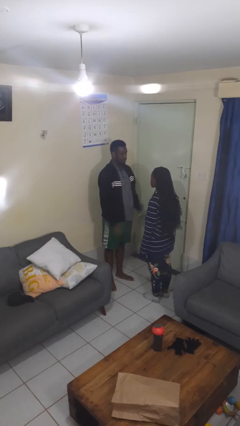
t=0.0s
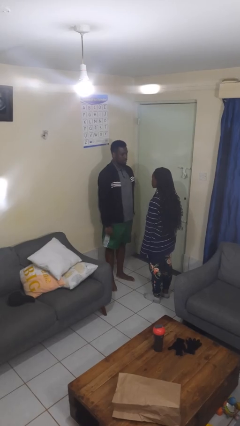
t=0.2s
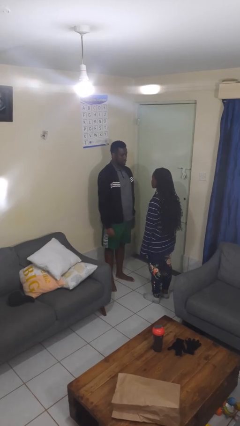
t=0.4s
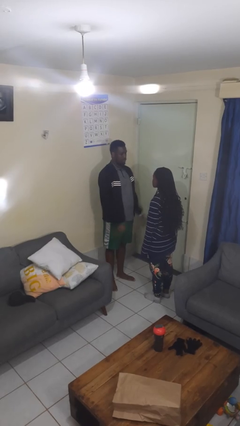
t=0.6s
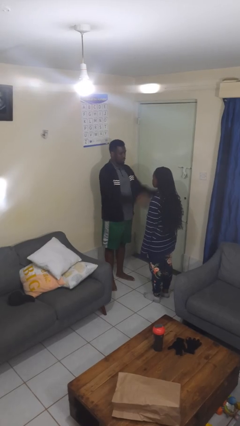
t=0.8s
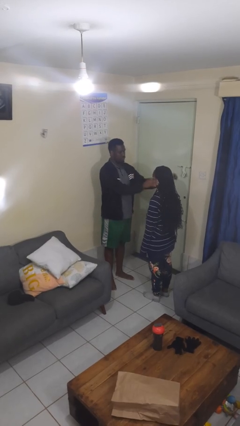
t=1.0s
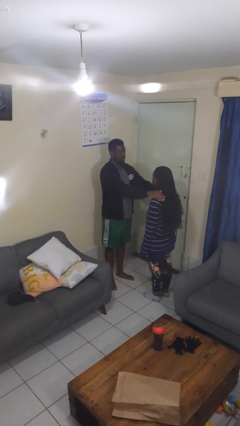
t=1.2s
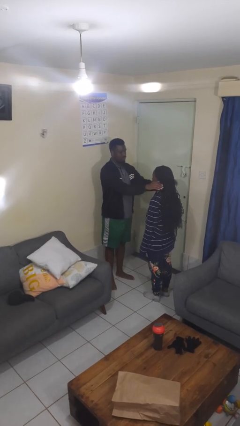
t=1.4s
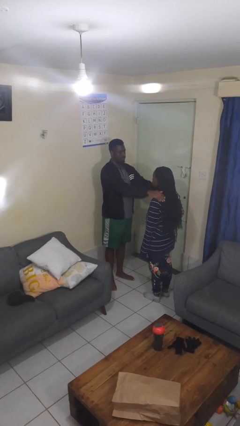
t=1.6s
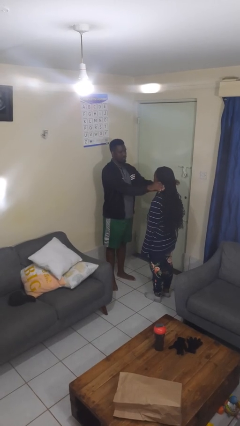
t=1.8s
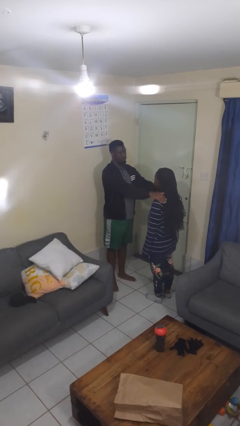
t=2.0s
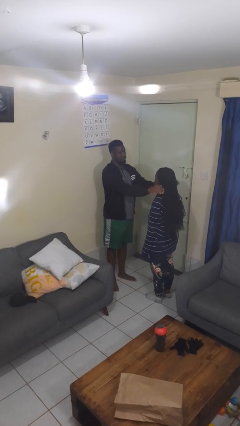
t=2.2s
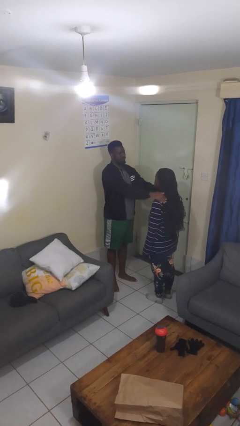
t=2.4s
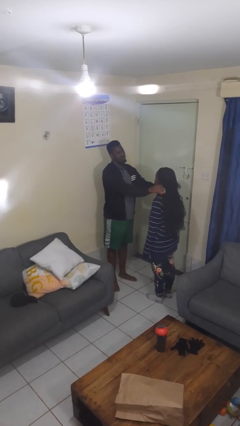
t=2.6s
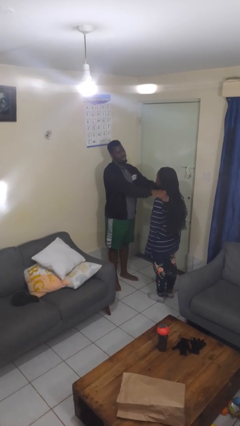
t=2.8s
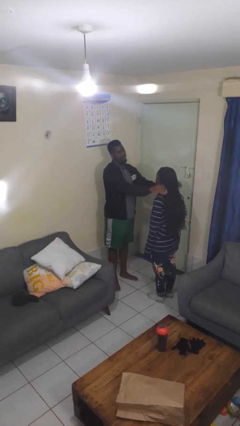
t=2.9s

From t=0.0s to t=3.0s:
person pounds shoulders of person

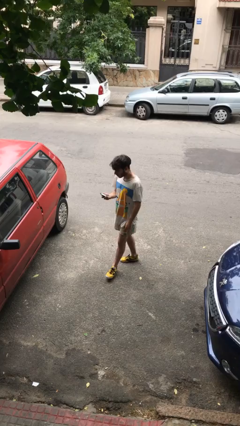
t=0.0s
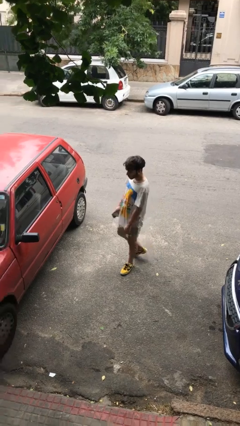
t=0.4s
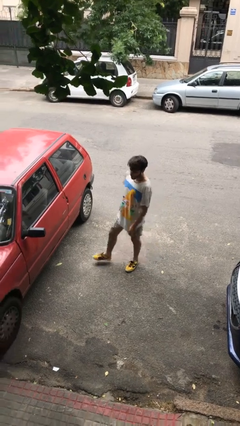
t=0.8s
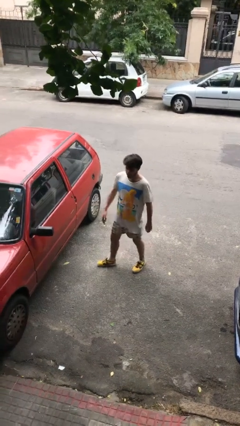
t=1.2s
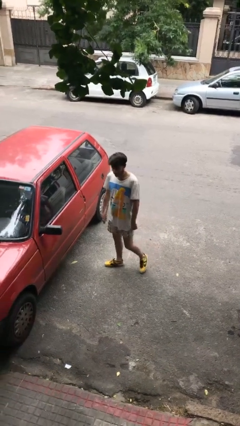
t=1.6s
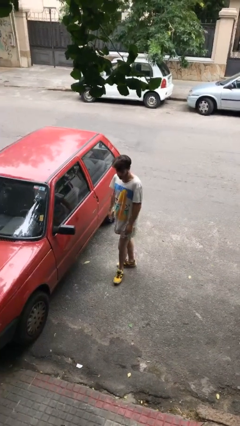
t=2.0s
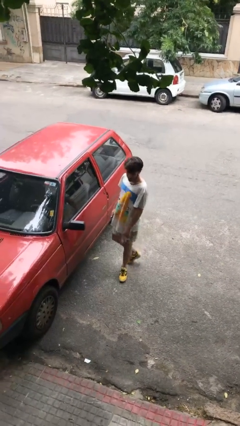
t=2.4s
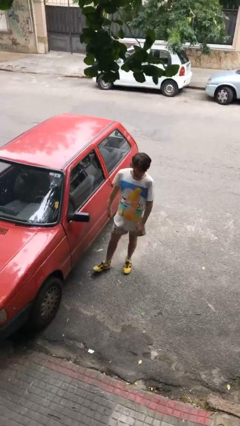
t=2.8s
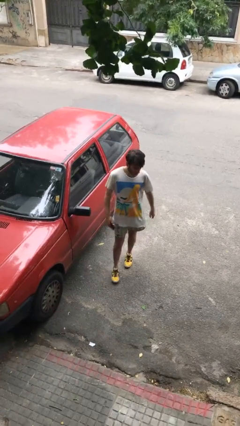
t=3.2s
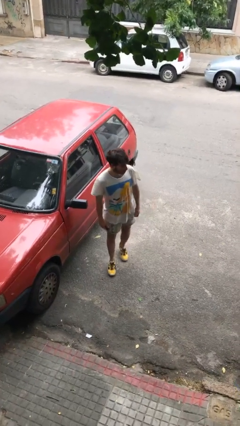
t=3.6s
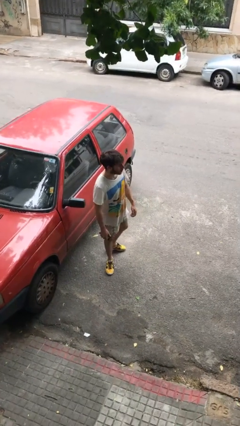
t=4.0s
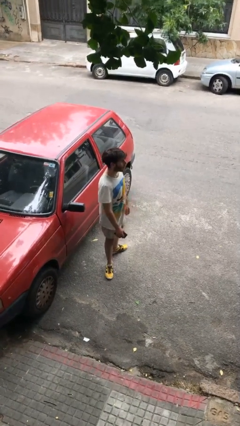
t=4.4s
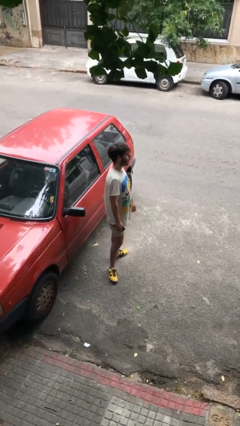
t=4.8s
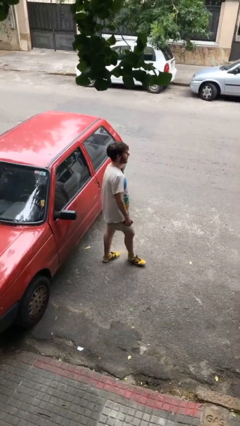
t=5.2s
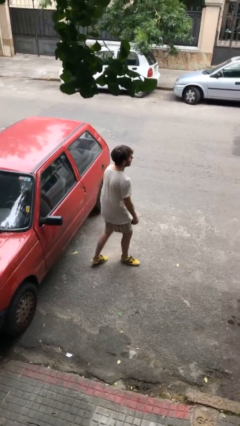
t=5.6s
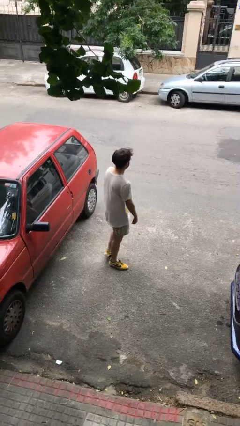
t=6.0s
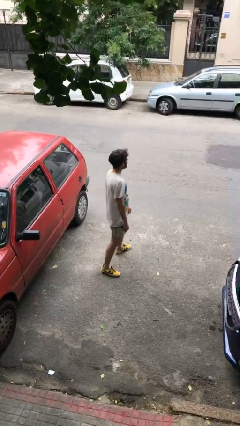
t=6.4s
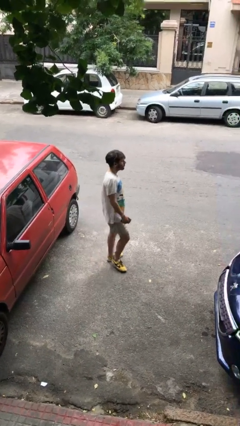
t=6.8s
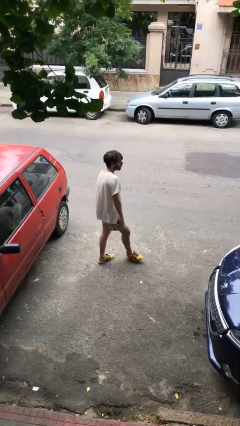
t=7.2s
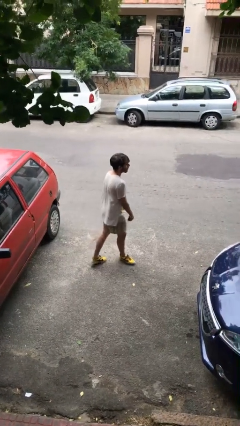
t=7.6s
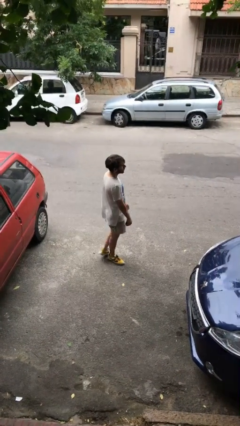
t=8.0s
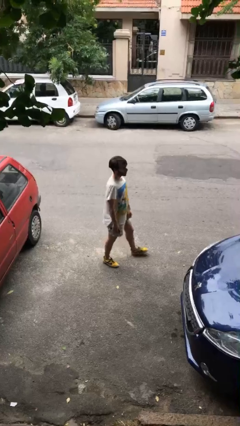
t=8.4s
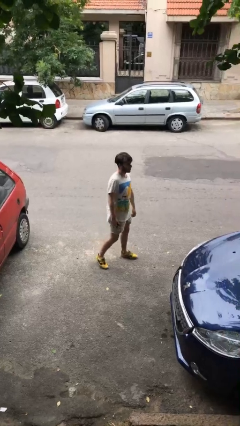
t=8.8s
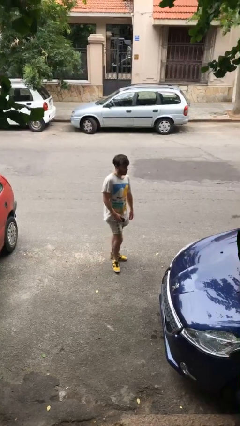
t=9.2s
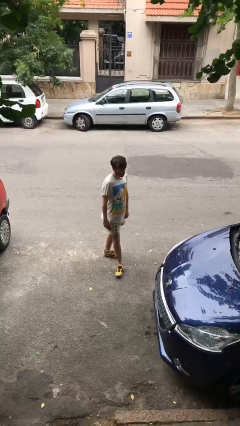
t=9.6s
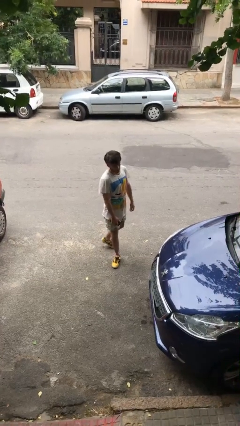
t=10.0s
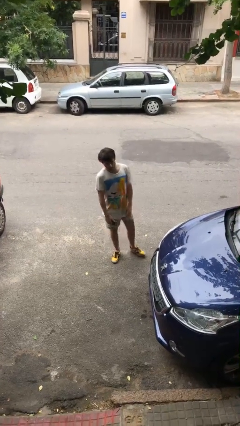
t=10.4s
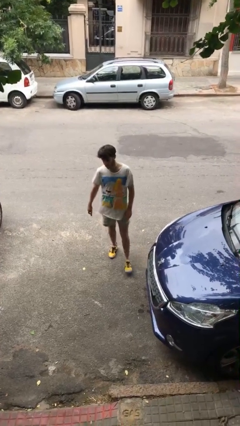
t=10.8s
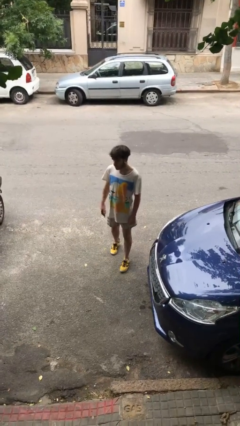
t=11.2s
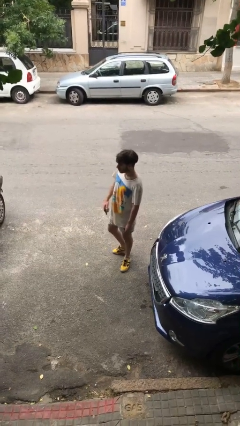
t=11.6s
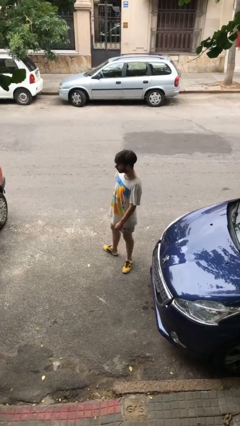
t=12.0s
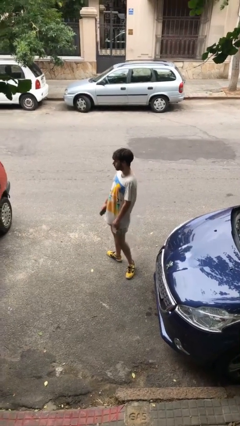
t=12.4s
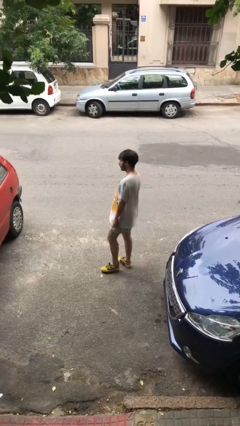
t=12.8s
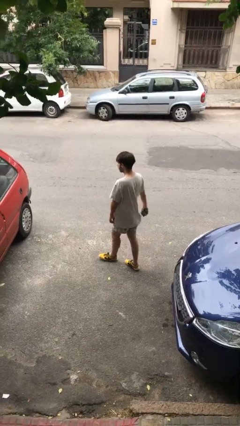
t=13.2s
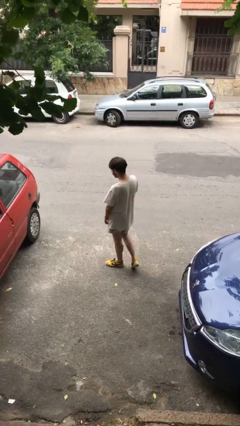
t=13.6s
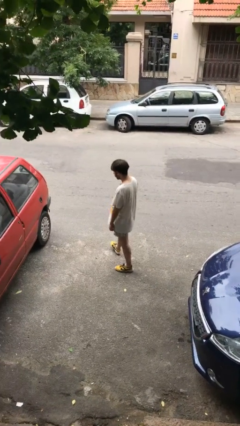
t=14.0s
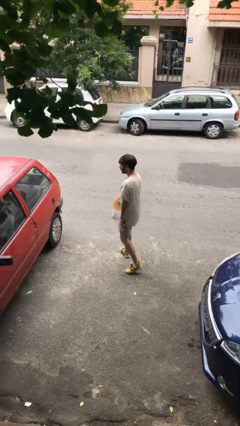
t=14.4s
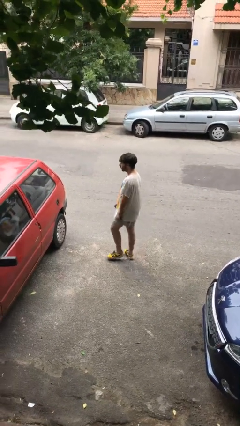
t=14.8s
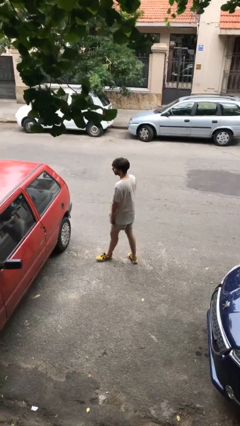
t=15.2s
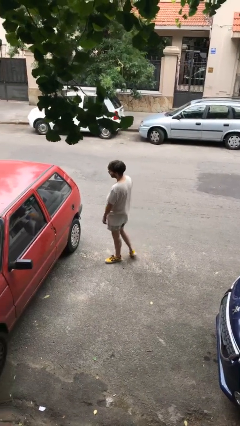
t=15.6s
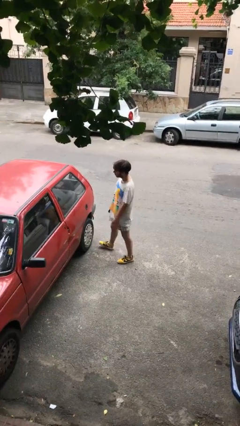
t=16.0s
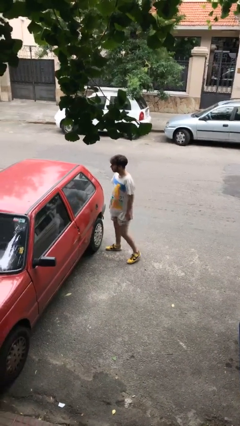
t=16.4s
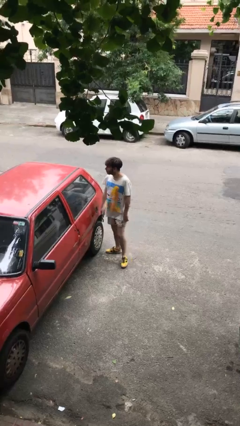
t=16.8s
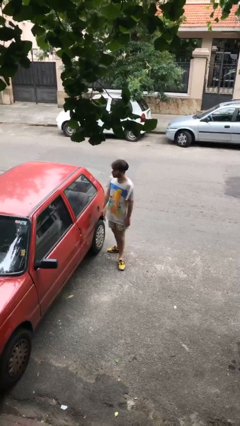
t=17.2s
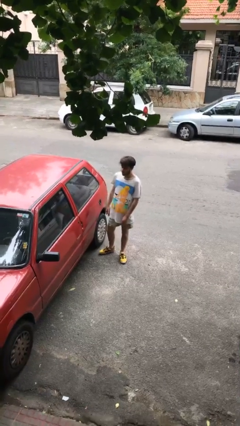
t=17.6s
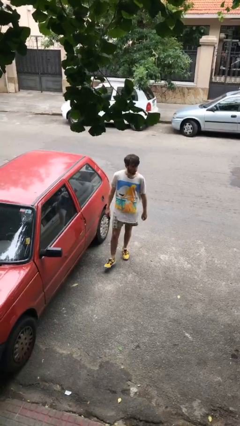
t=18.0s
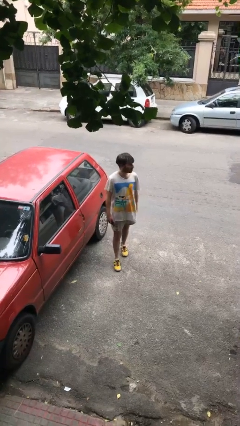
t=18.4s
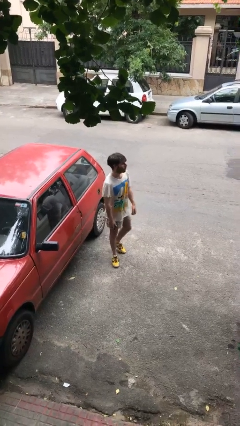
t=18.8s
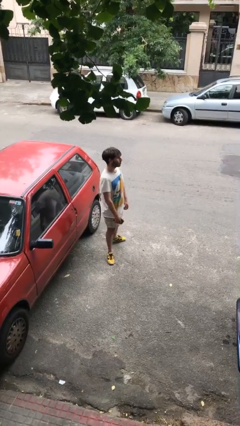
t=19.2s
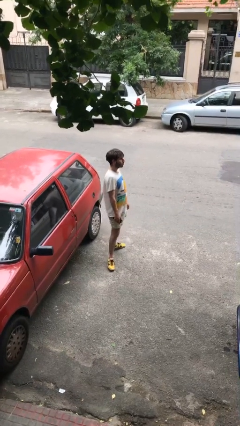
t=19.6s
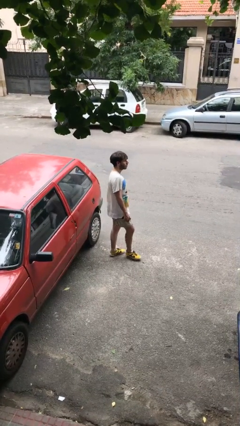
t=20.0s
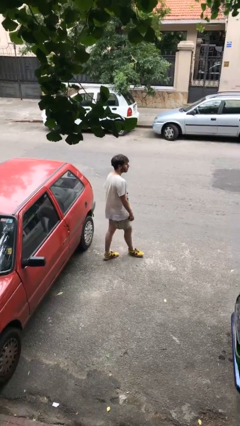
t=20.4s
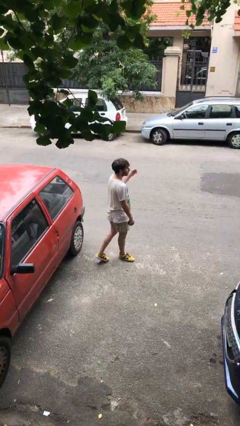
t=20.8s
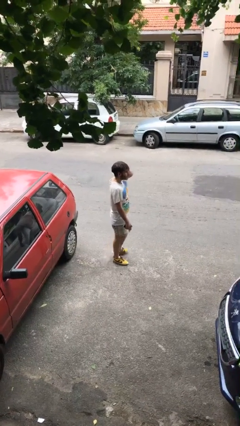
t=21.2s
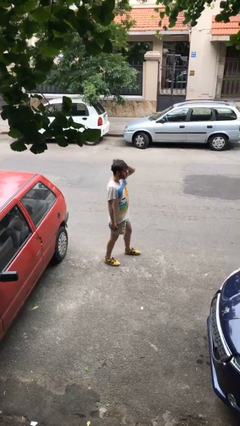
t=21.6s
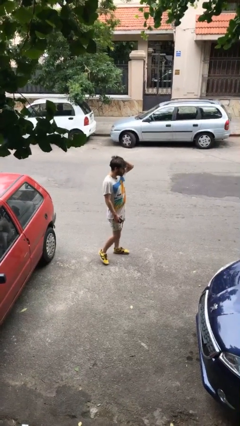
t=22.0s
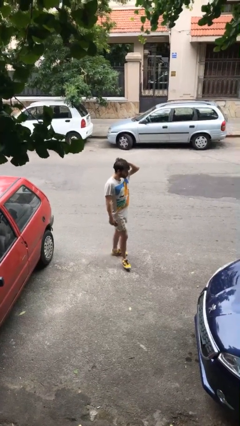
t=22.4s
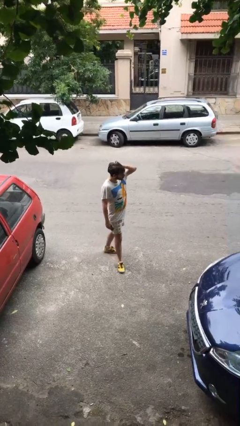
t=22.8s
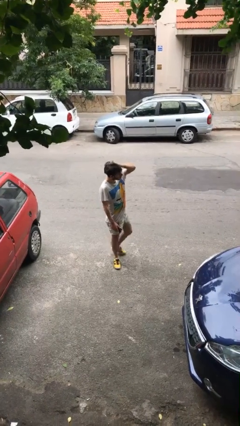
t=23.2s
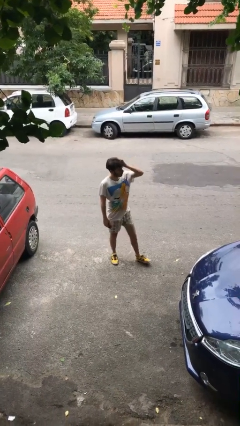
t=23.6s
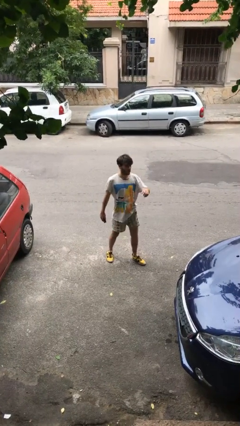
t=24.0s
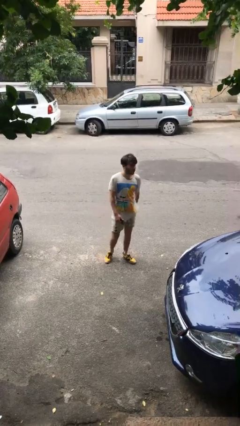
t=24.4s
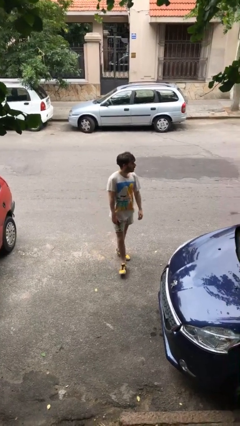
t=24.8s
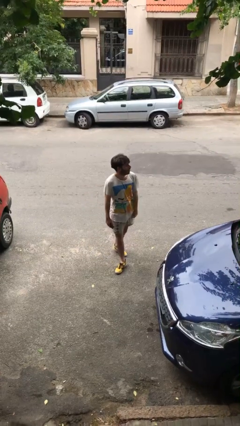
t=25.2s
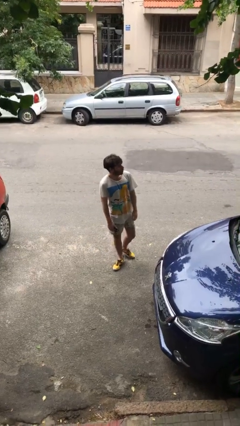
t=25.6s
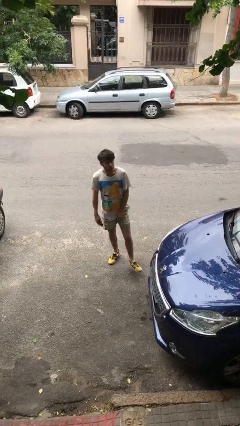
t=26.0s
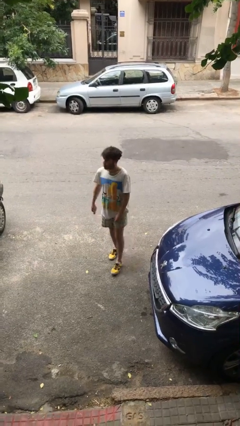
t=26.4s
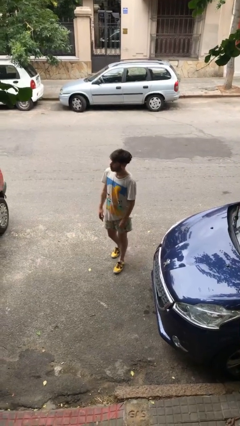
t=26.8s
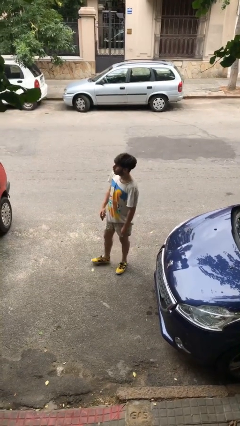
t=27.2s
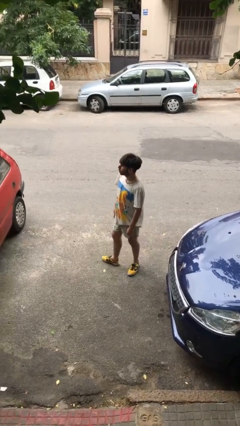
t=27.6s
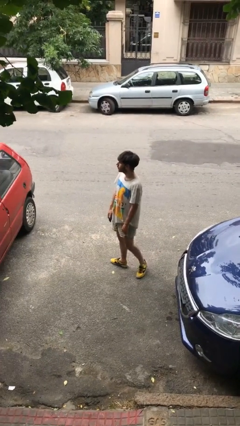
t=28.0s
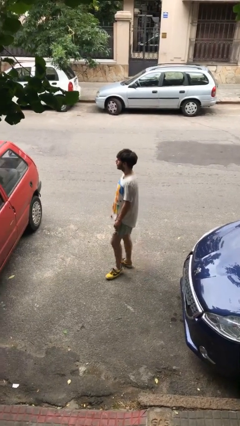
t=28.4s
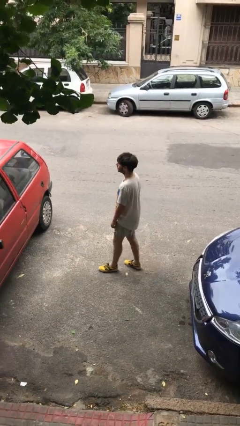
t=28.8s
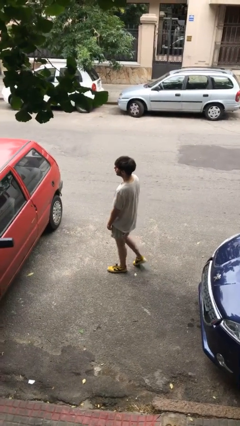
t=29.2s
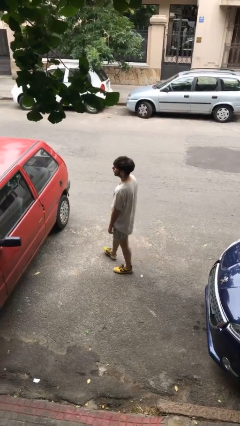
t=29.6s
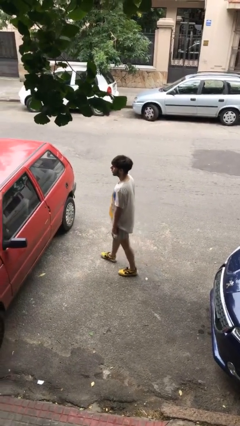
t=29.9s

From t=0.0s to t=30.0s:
person walks

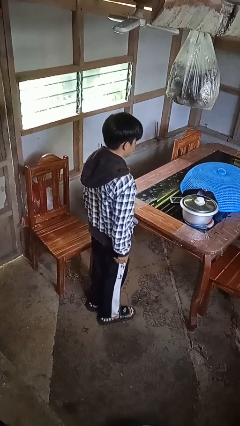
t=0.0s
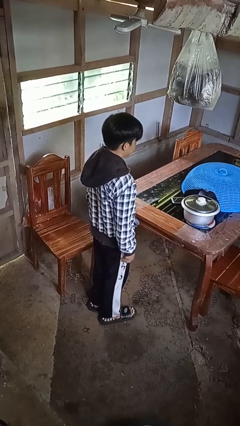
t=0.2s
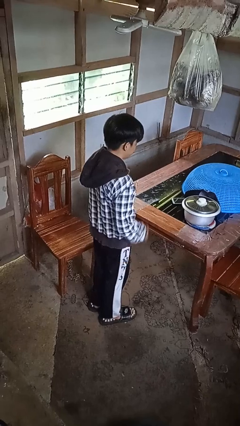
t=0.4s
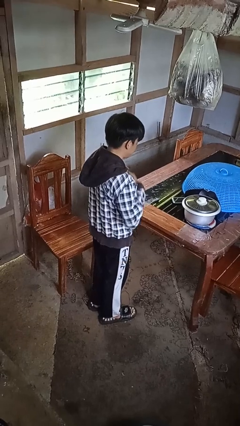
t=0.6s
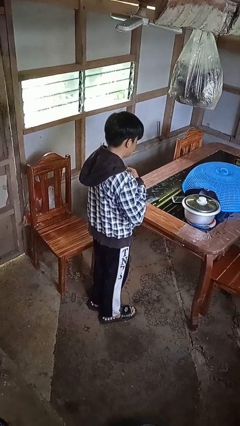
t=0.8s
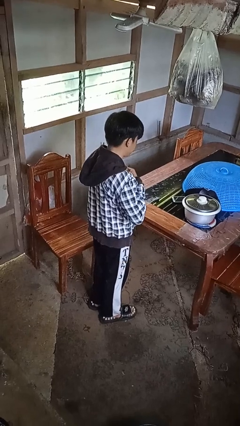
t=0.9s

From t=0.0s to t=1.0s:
person unzips jacket
